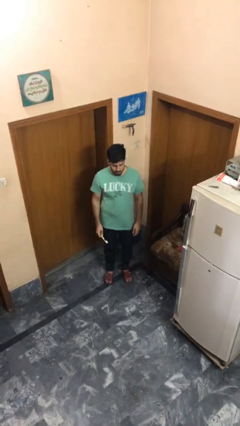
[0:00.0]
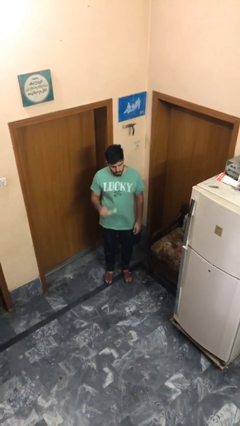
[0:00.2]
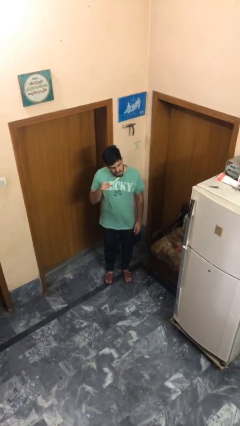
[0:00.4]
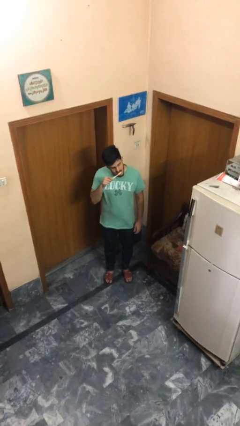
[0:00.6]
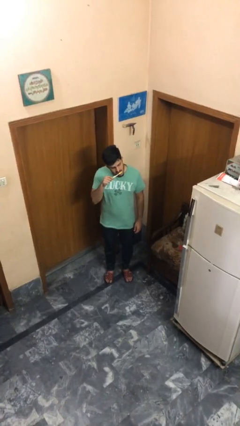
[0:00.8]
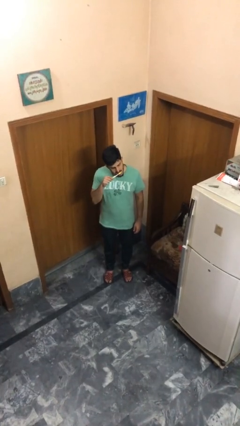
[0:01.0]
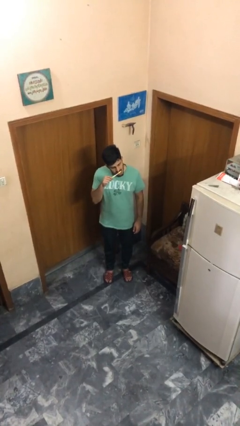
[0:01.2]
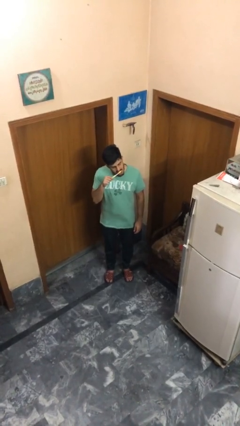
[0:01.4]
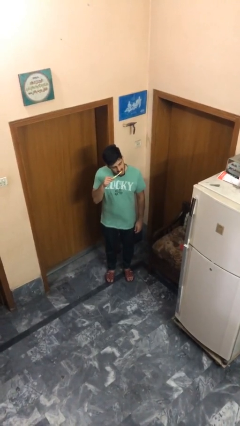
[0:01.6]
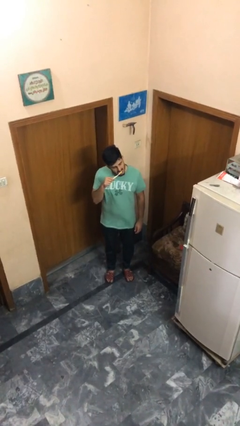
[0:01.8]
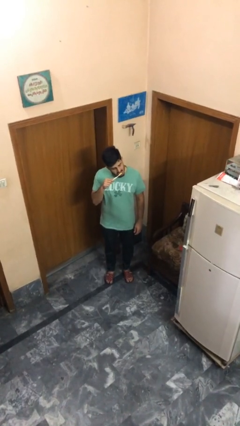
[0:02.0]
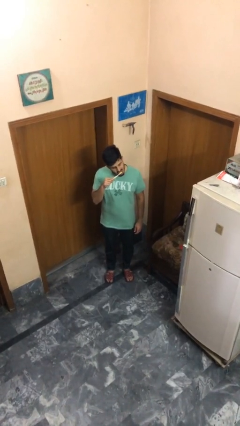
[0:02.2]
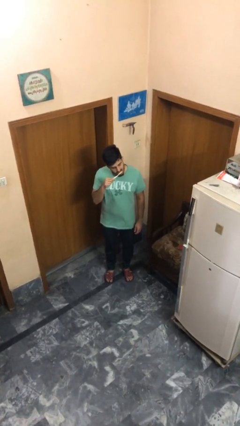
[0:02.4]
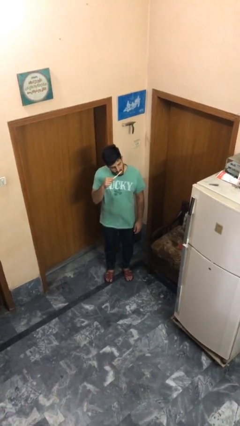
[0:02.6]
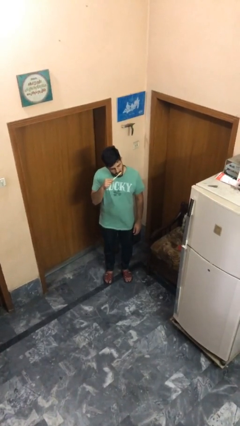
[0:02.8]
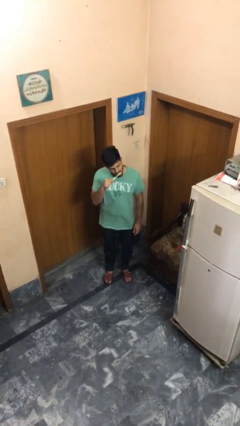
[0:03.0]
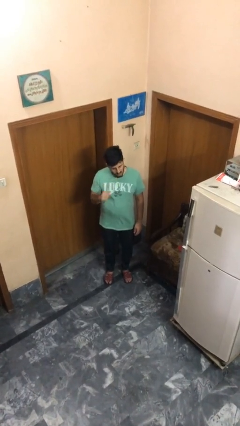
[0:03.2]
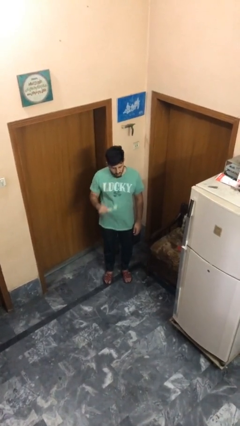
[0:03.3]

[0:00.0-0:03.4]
person brushes teeth

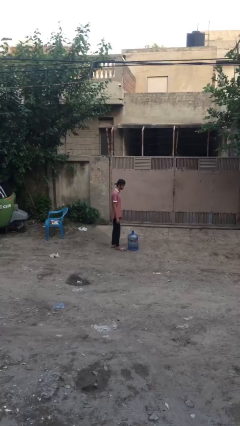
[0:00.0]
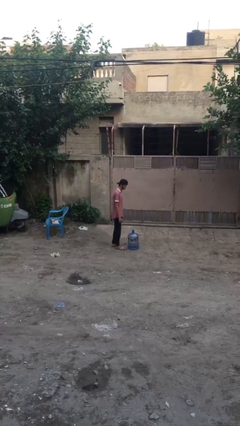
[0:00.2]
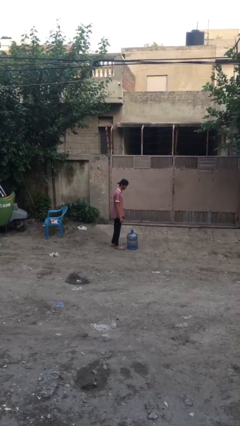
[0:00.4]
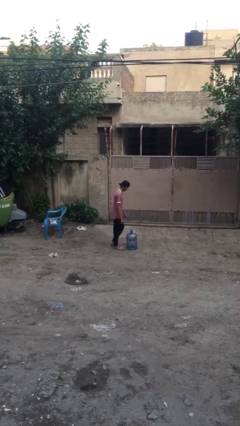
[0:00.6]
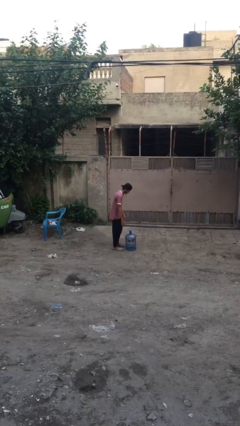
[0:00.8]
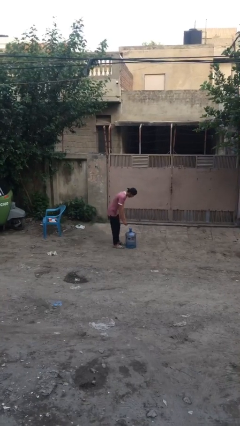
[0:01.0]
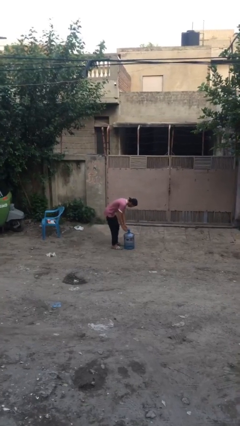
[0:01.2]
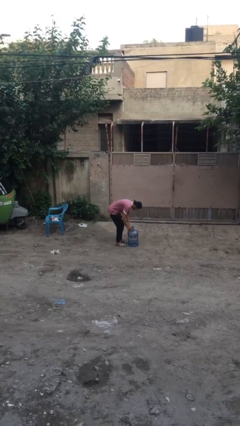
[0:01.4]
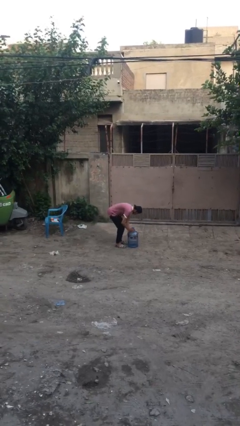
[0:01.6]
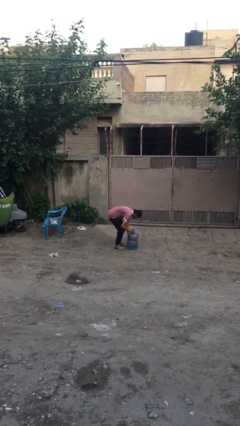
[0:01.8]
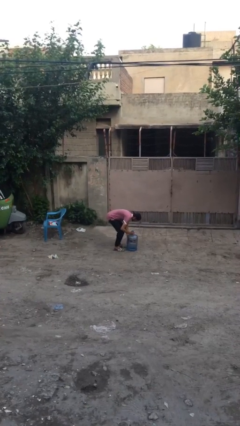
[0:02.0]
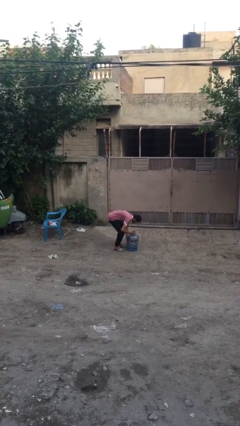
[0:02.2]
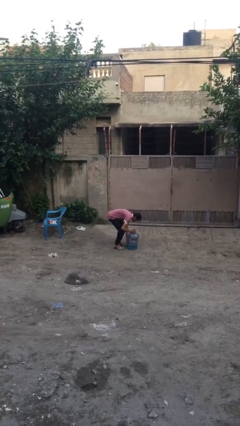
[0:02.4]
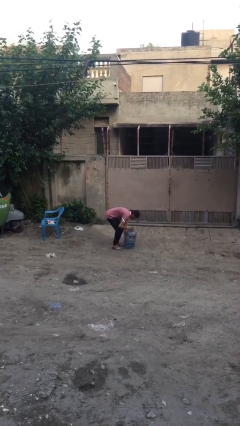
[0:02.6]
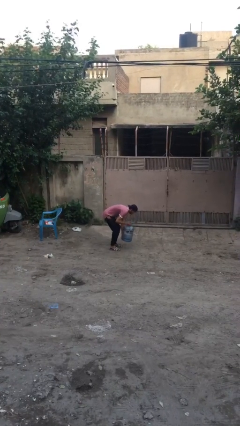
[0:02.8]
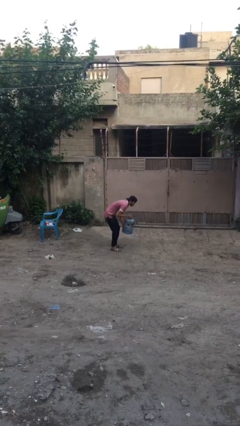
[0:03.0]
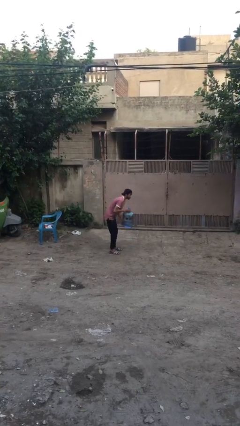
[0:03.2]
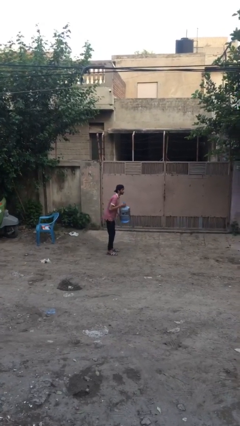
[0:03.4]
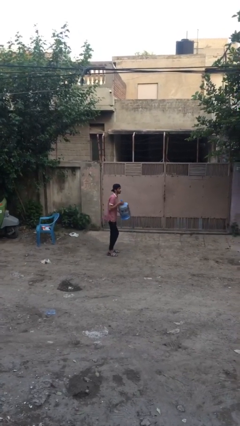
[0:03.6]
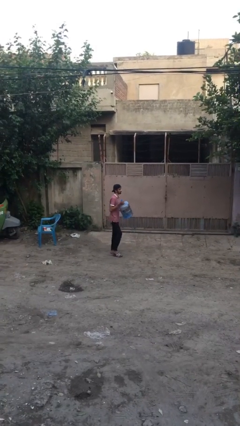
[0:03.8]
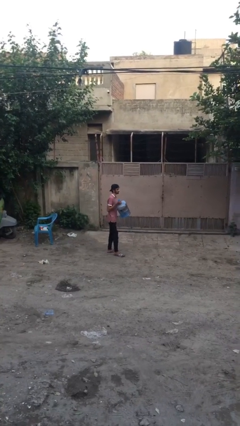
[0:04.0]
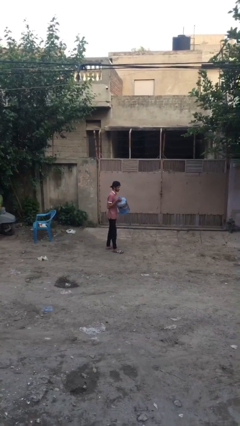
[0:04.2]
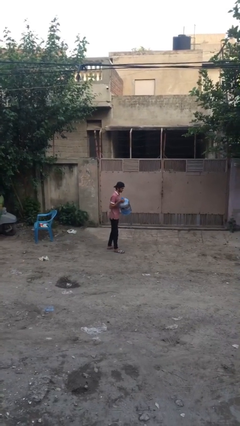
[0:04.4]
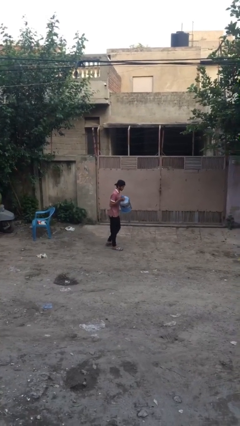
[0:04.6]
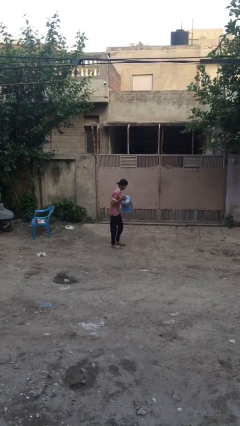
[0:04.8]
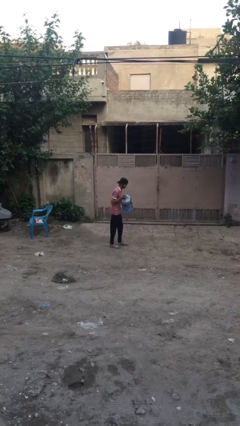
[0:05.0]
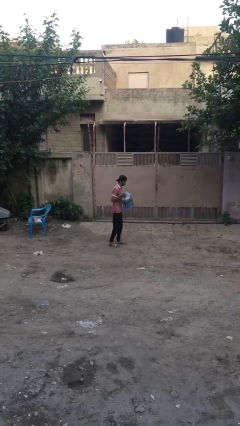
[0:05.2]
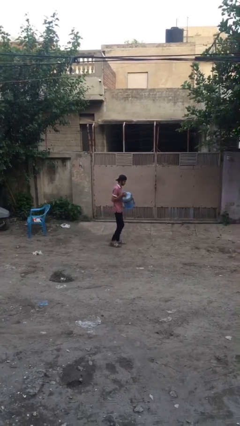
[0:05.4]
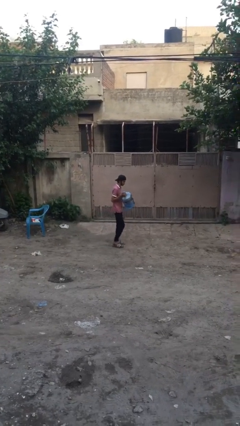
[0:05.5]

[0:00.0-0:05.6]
person carries heavy object

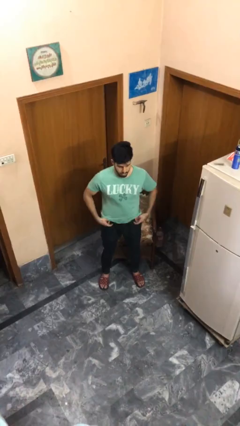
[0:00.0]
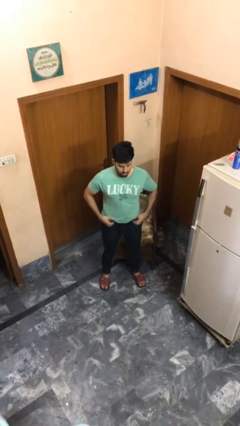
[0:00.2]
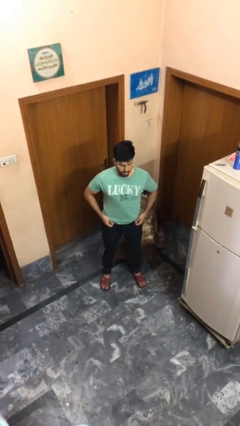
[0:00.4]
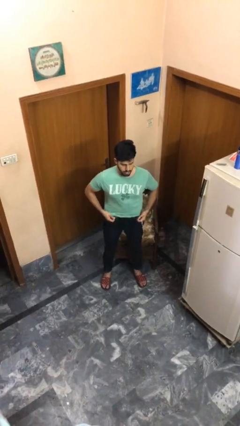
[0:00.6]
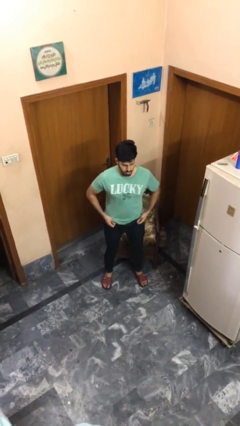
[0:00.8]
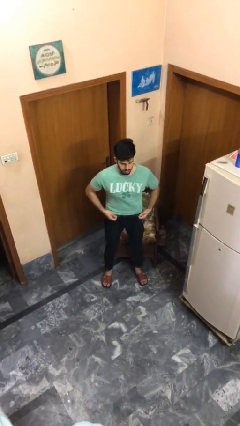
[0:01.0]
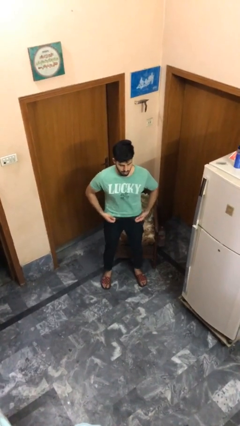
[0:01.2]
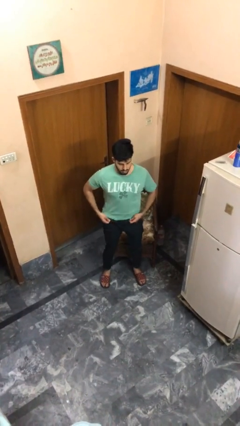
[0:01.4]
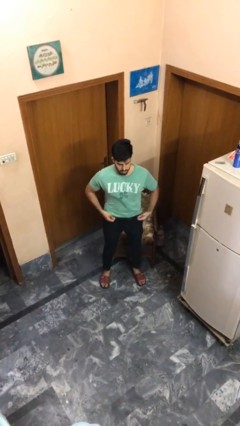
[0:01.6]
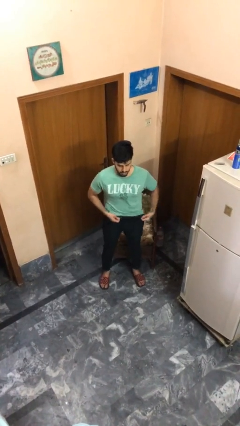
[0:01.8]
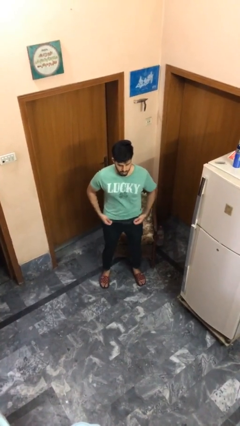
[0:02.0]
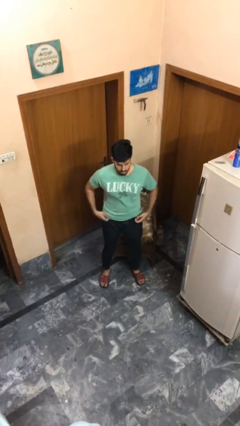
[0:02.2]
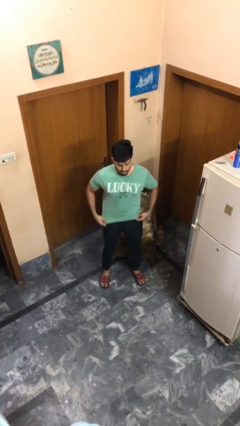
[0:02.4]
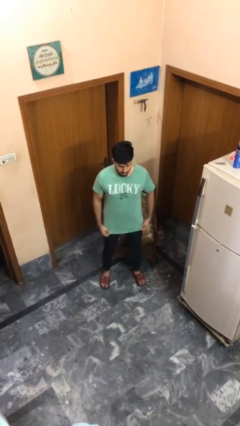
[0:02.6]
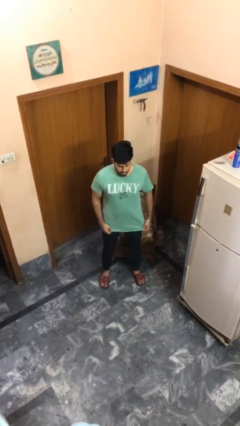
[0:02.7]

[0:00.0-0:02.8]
person hikes up pants

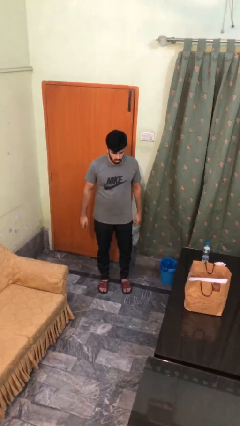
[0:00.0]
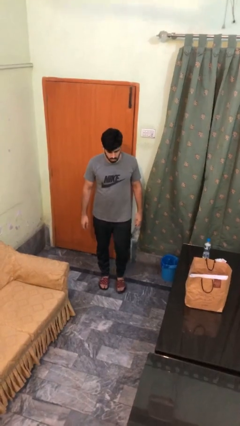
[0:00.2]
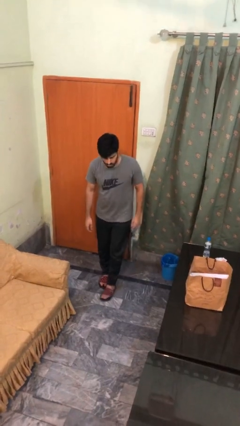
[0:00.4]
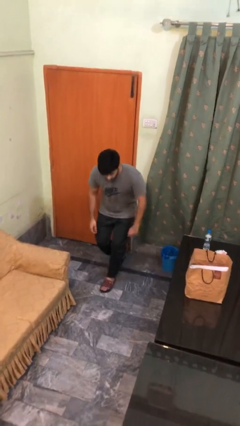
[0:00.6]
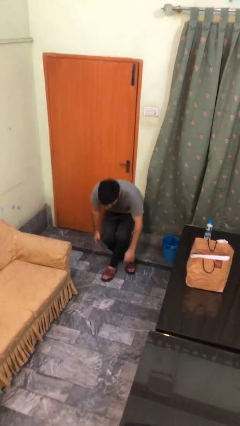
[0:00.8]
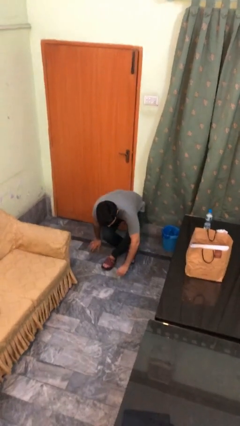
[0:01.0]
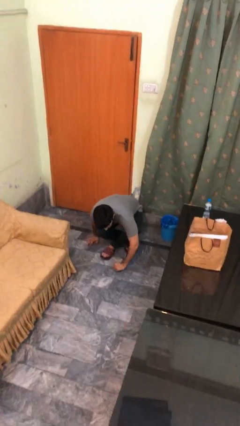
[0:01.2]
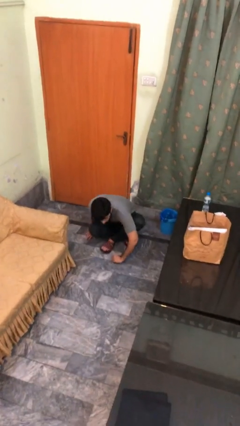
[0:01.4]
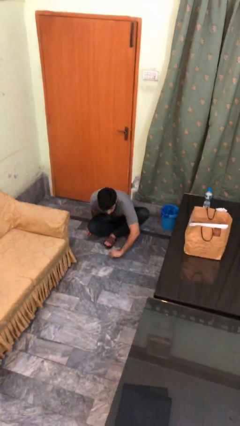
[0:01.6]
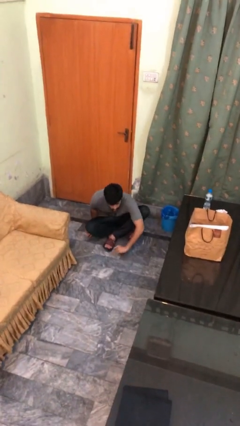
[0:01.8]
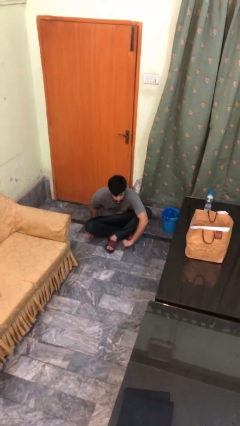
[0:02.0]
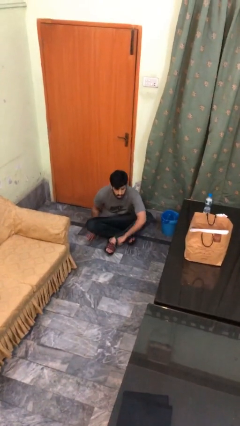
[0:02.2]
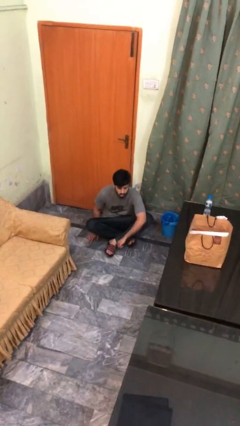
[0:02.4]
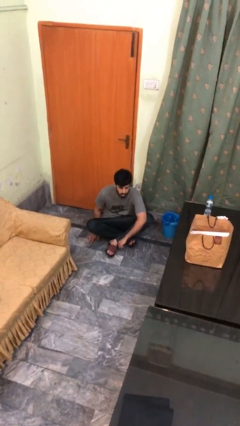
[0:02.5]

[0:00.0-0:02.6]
person sits crisscross

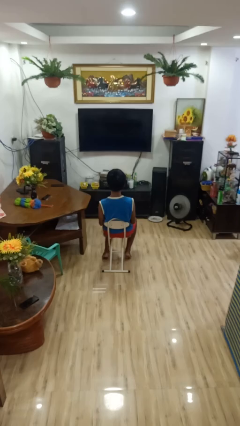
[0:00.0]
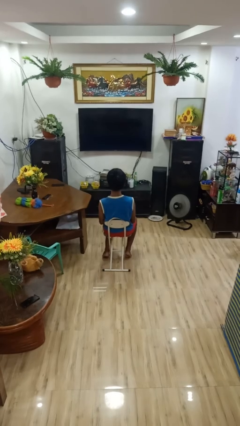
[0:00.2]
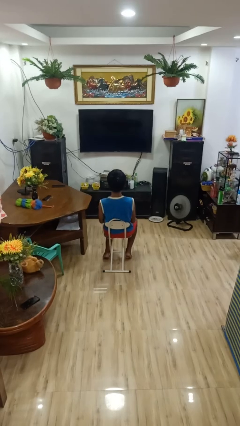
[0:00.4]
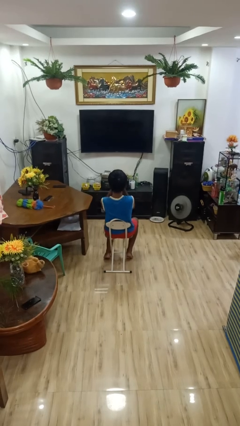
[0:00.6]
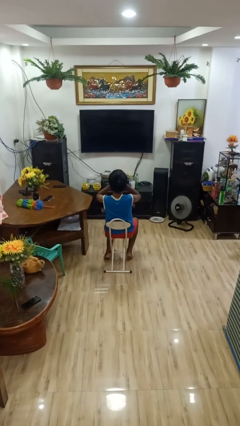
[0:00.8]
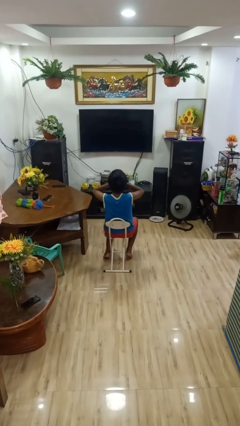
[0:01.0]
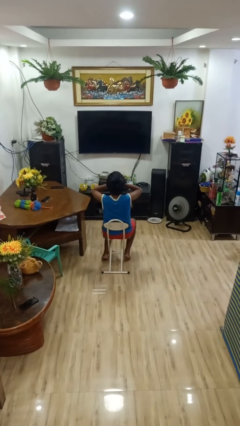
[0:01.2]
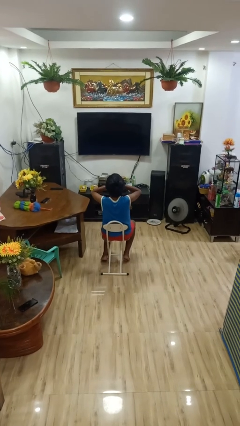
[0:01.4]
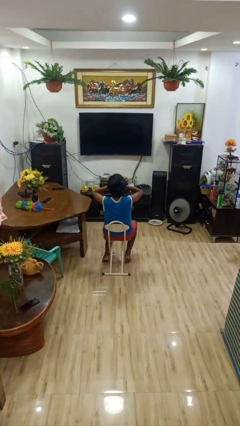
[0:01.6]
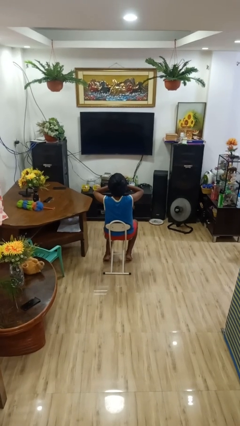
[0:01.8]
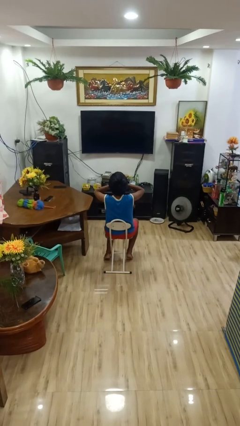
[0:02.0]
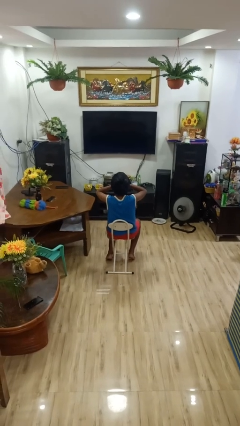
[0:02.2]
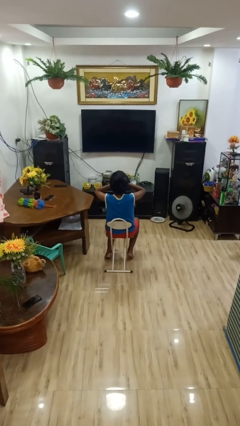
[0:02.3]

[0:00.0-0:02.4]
person covers face with hands

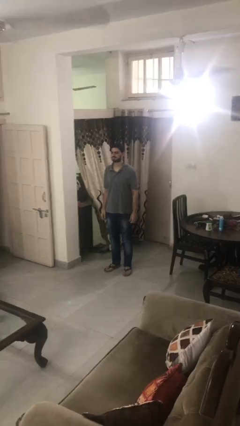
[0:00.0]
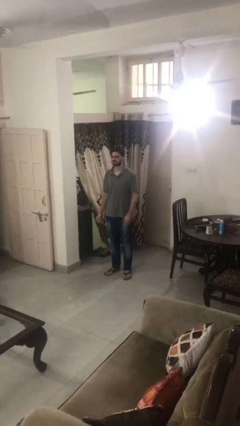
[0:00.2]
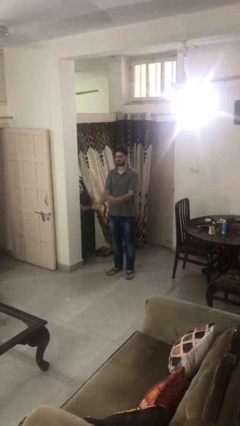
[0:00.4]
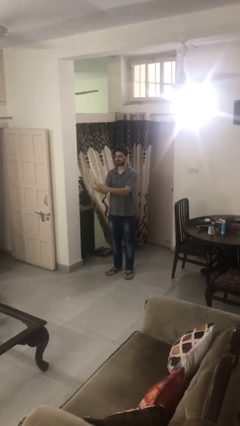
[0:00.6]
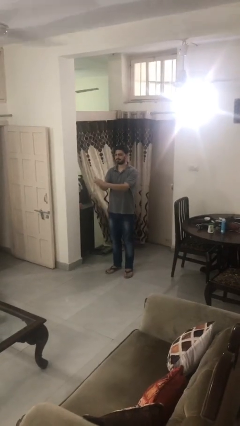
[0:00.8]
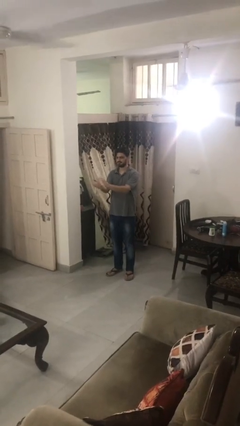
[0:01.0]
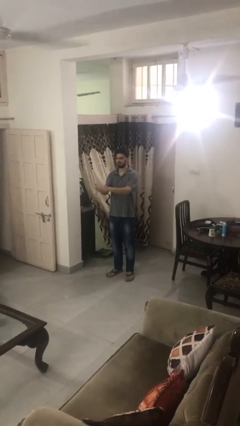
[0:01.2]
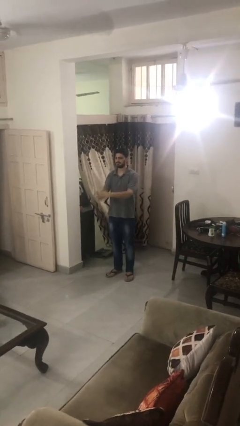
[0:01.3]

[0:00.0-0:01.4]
person claps hands
